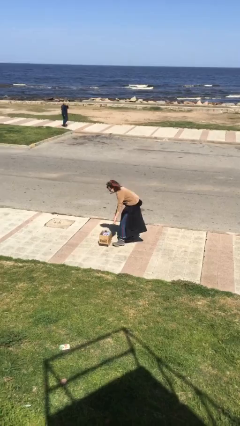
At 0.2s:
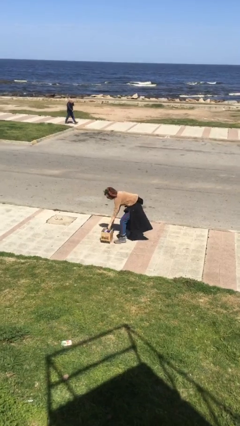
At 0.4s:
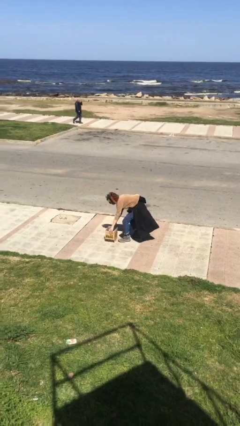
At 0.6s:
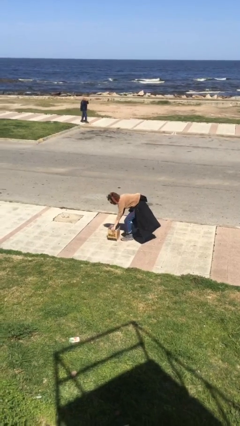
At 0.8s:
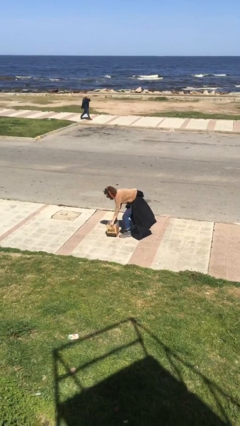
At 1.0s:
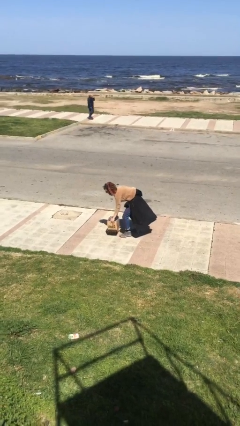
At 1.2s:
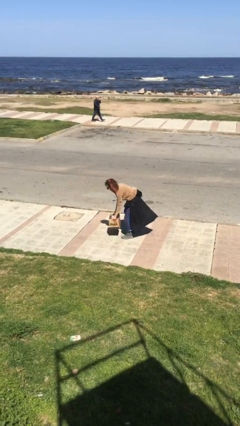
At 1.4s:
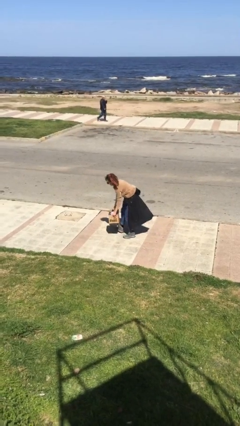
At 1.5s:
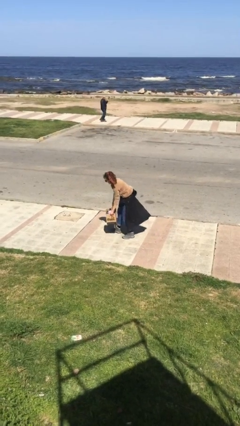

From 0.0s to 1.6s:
person picks up object from floor

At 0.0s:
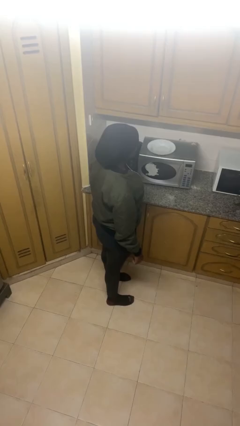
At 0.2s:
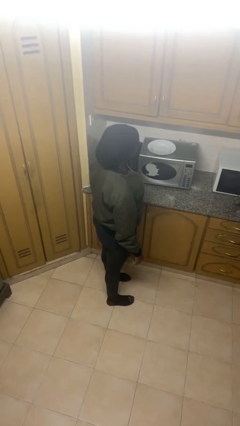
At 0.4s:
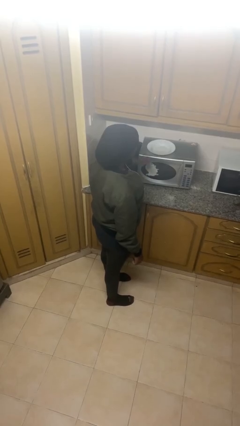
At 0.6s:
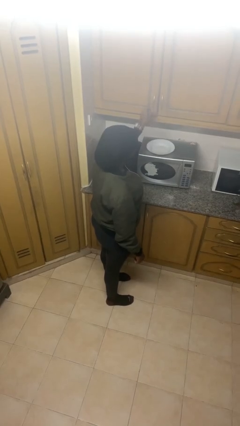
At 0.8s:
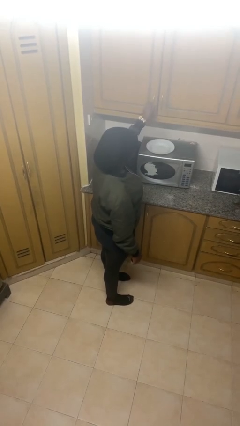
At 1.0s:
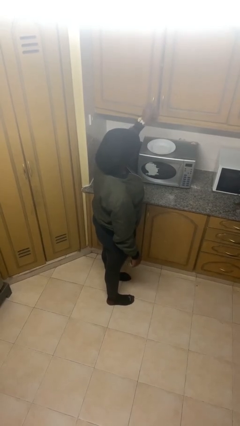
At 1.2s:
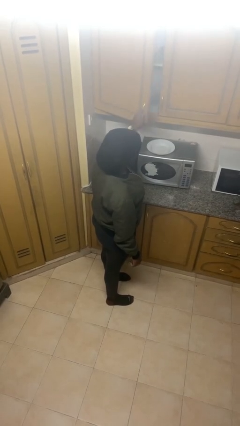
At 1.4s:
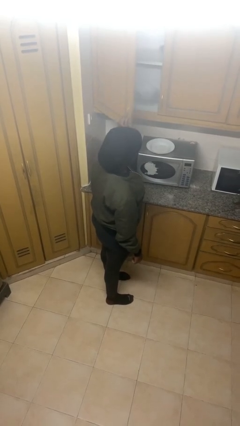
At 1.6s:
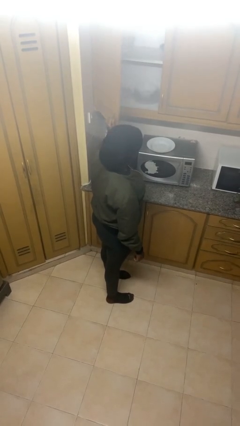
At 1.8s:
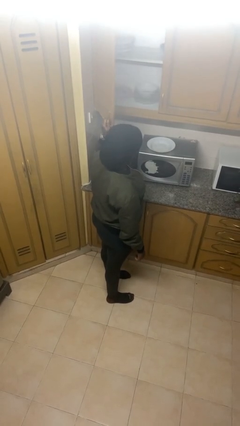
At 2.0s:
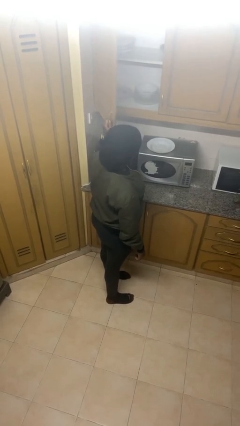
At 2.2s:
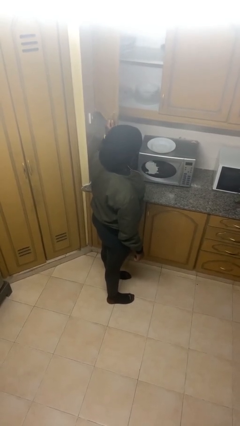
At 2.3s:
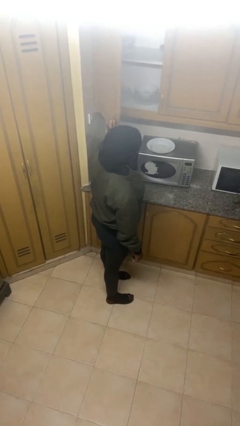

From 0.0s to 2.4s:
person opens cabinet

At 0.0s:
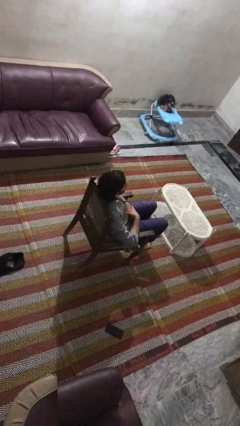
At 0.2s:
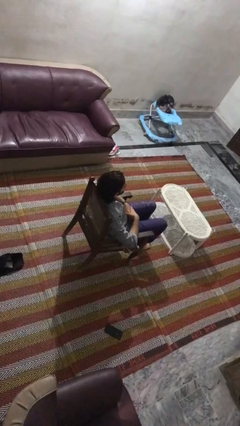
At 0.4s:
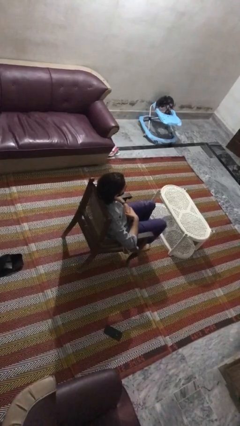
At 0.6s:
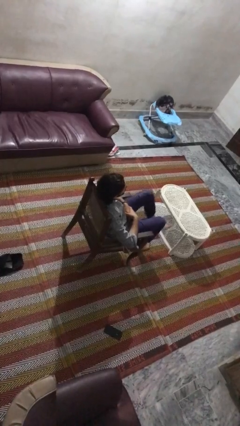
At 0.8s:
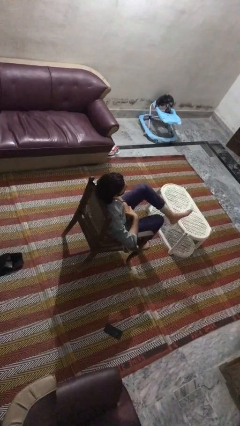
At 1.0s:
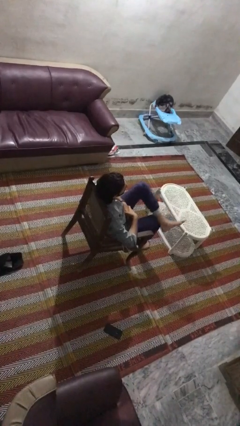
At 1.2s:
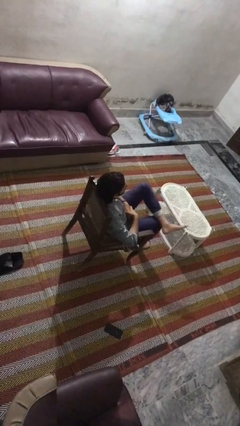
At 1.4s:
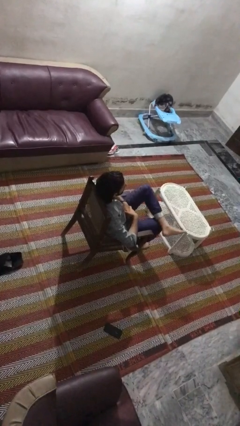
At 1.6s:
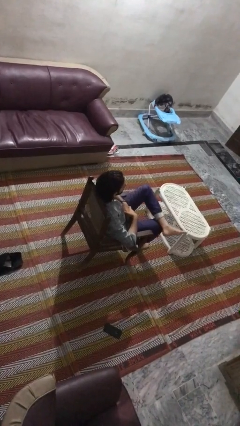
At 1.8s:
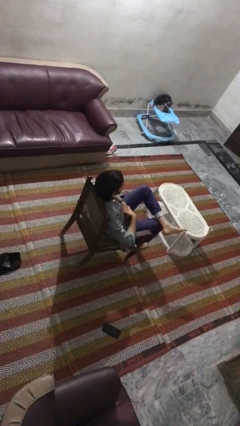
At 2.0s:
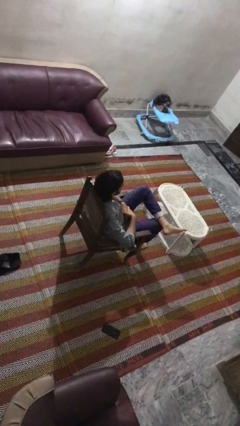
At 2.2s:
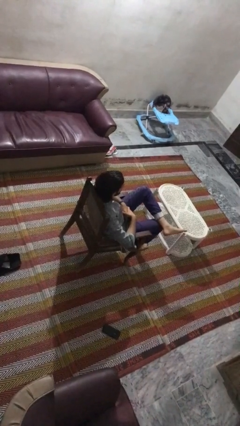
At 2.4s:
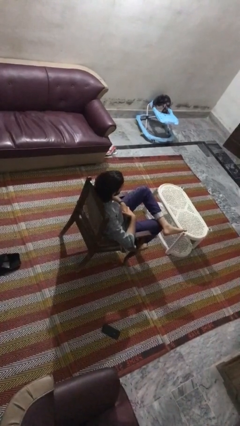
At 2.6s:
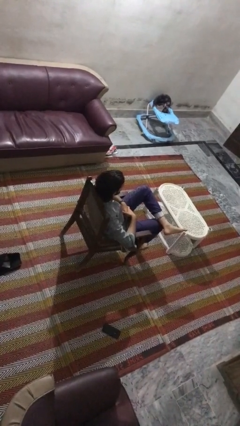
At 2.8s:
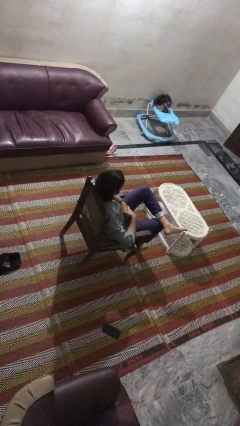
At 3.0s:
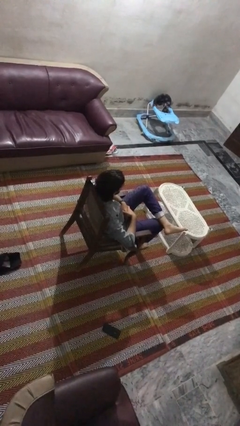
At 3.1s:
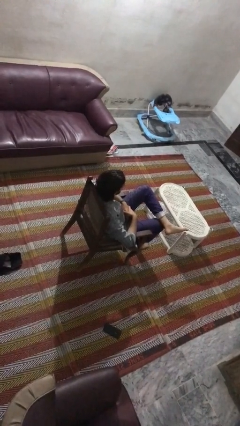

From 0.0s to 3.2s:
person crosses legs

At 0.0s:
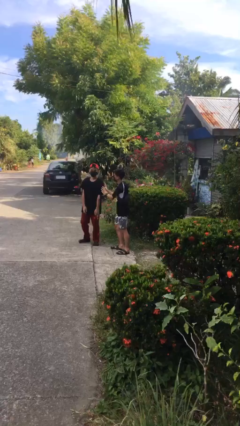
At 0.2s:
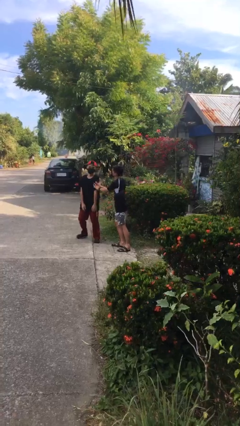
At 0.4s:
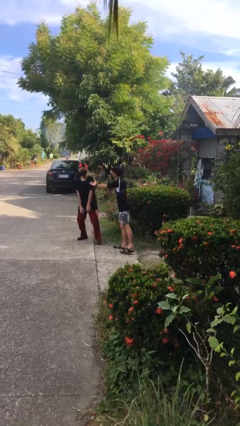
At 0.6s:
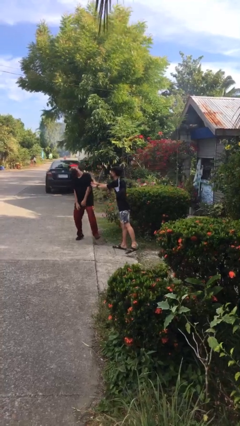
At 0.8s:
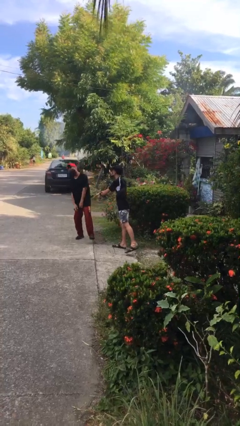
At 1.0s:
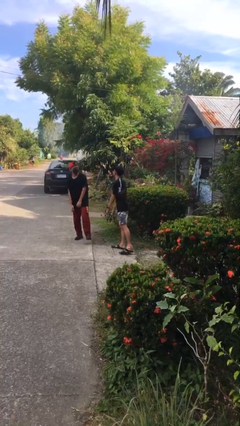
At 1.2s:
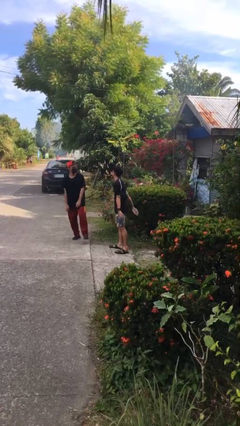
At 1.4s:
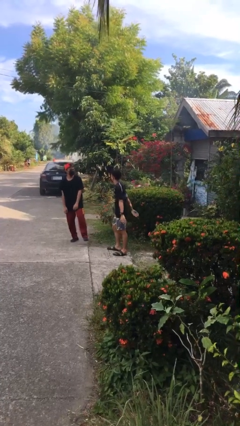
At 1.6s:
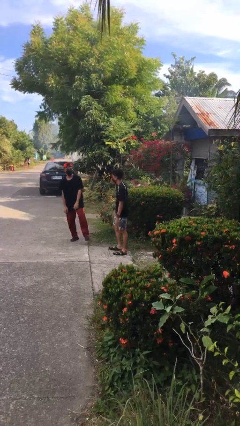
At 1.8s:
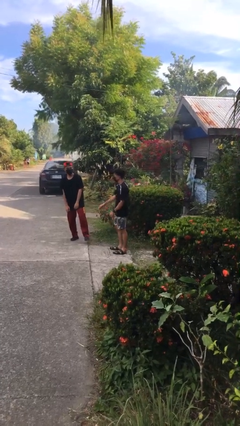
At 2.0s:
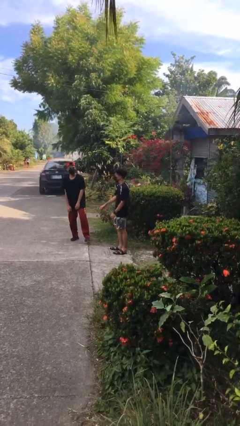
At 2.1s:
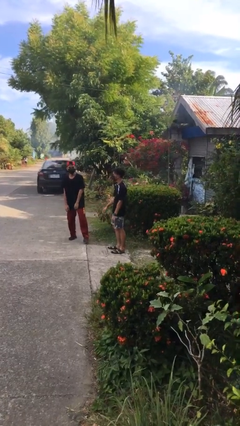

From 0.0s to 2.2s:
person shoves person

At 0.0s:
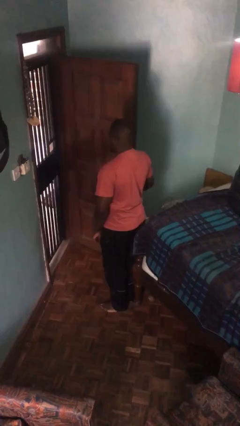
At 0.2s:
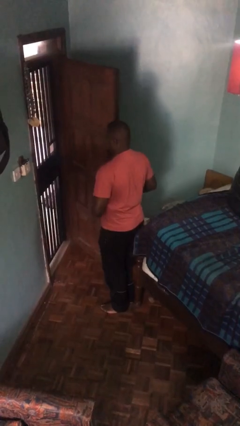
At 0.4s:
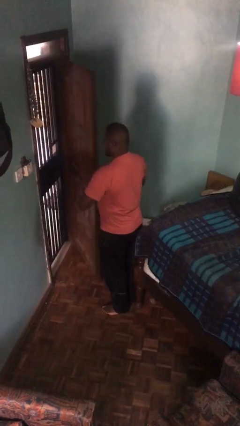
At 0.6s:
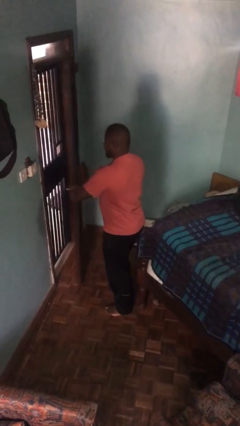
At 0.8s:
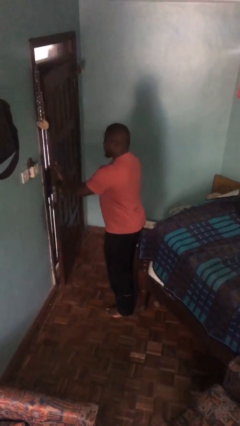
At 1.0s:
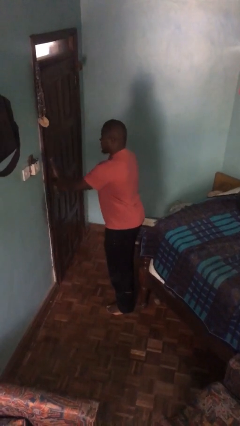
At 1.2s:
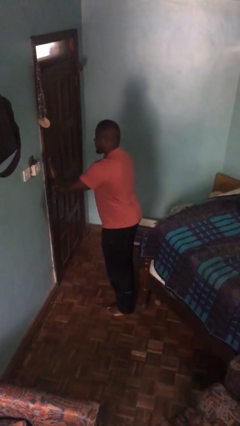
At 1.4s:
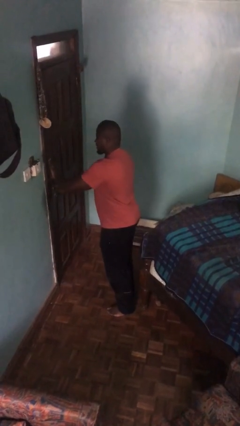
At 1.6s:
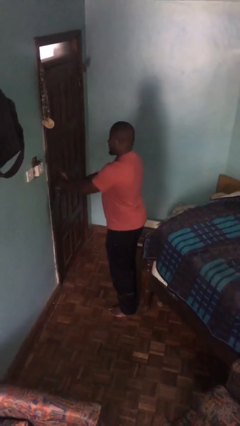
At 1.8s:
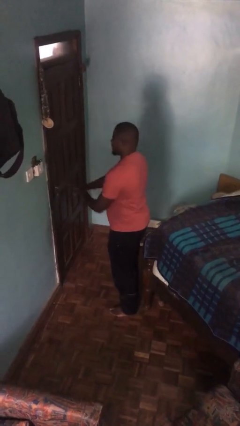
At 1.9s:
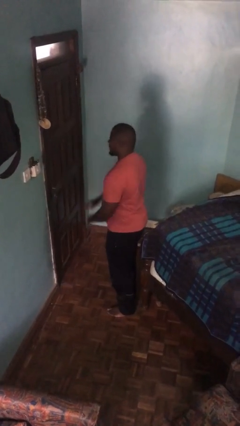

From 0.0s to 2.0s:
person closes facility door

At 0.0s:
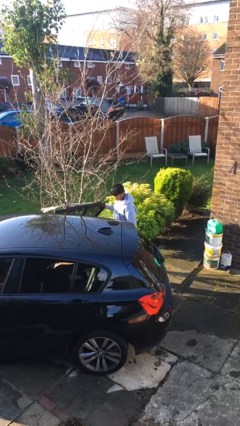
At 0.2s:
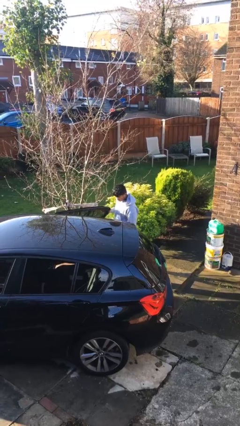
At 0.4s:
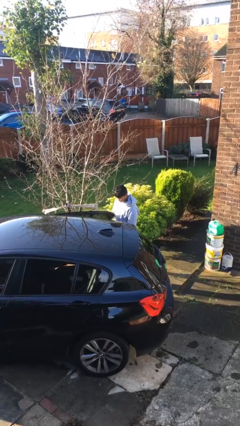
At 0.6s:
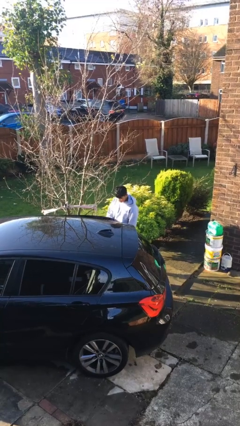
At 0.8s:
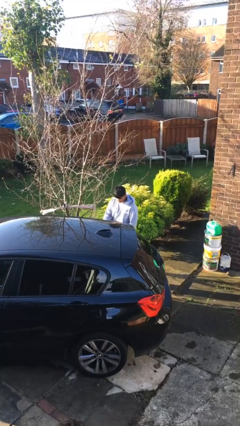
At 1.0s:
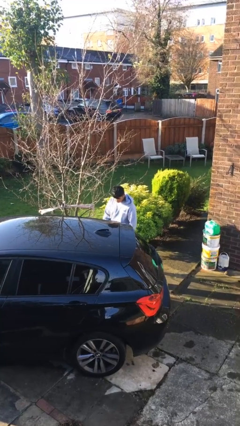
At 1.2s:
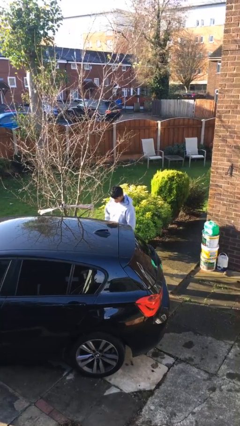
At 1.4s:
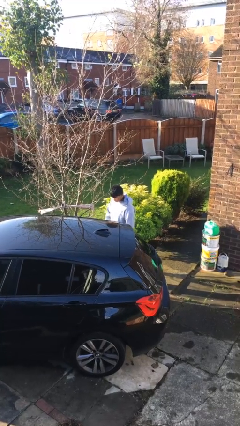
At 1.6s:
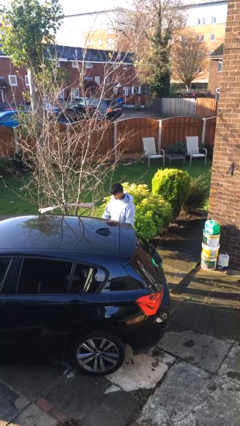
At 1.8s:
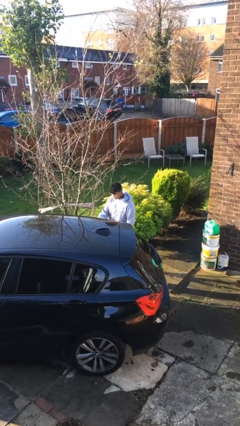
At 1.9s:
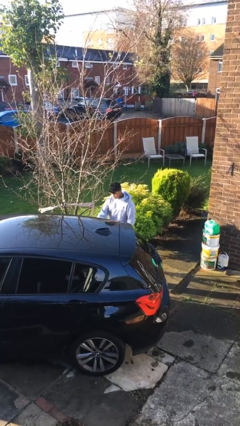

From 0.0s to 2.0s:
person closes car door

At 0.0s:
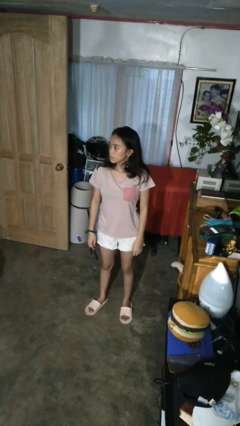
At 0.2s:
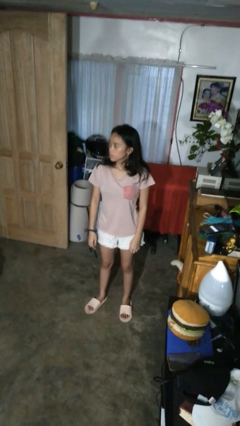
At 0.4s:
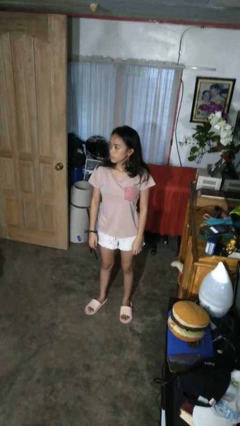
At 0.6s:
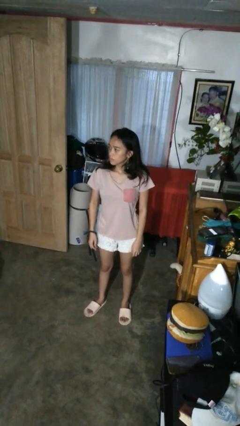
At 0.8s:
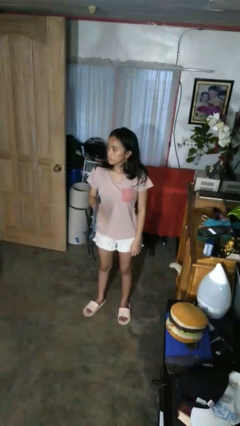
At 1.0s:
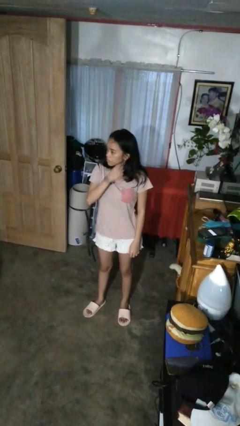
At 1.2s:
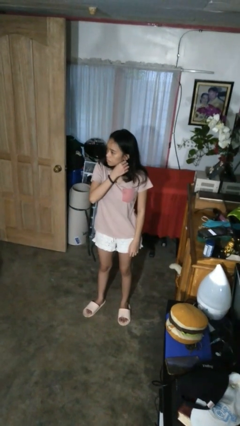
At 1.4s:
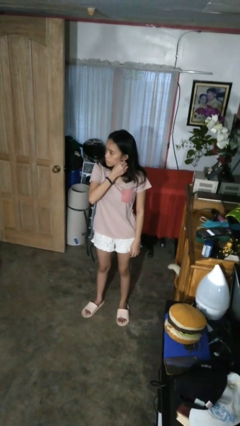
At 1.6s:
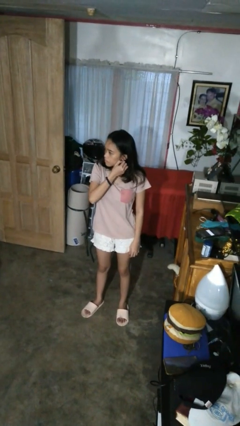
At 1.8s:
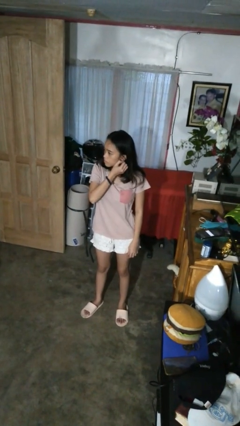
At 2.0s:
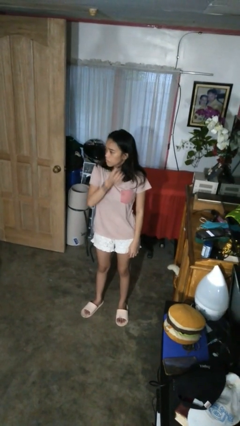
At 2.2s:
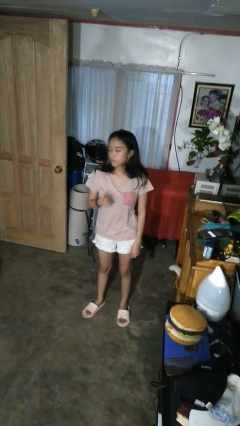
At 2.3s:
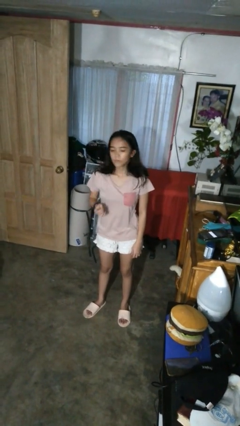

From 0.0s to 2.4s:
person takes off earrings

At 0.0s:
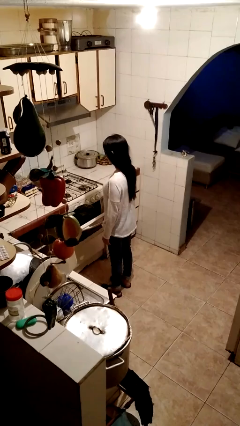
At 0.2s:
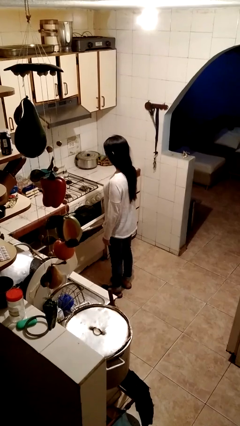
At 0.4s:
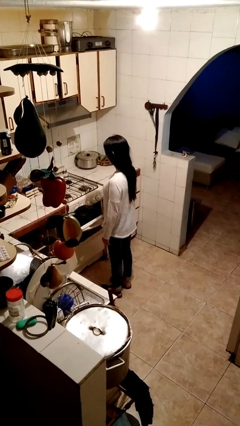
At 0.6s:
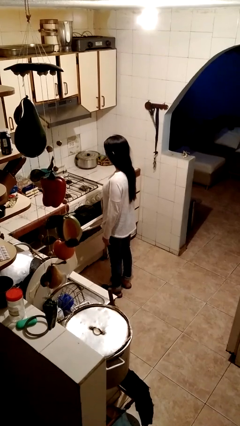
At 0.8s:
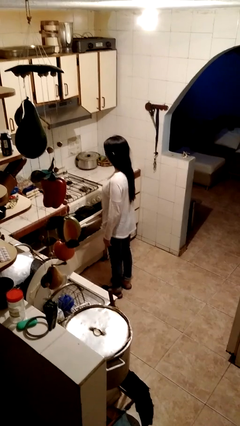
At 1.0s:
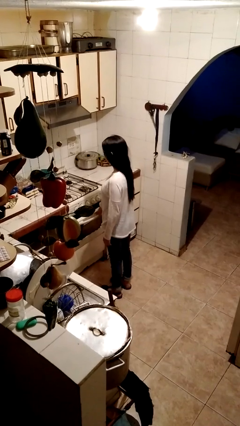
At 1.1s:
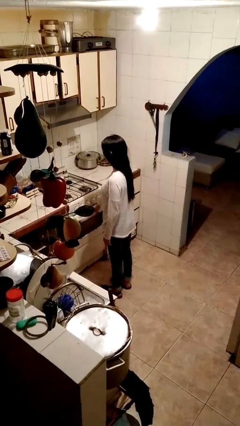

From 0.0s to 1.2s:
person closes oven door
